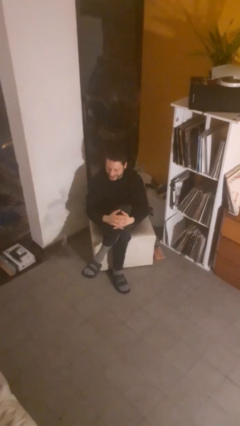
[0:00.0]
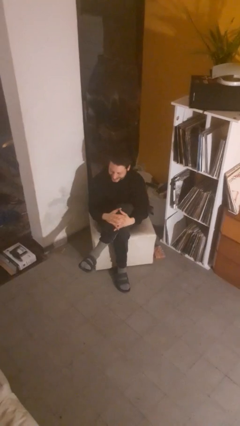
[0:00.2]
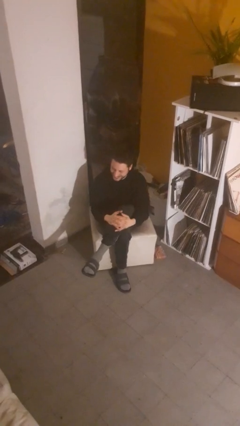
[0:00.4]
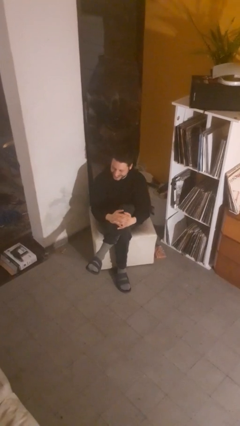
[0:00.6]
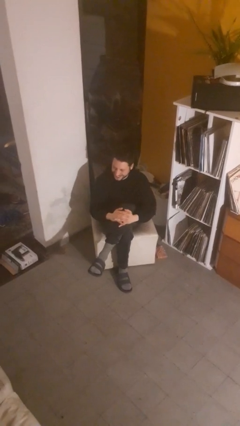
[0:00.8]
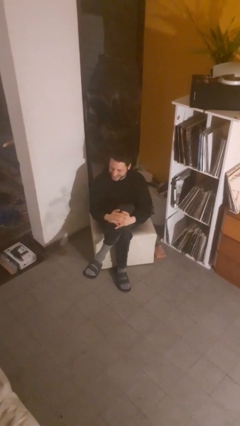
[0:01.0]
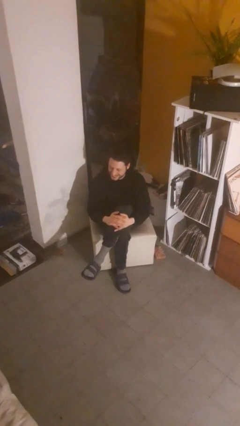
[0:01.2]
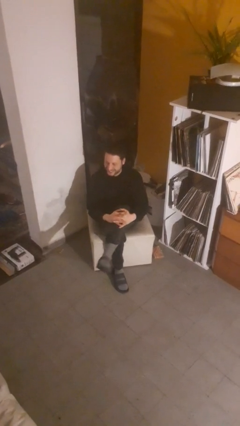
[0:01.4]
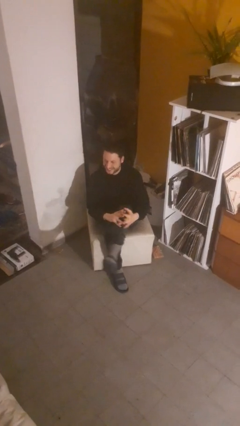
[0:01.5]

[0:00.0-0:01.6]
person crosses legs

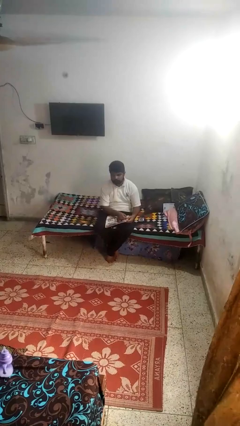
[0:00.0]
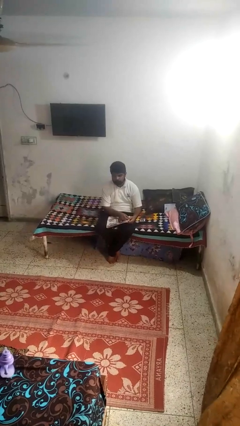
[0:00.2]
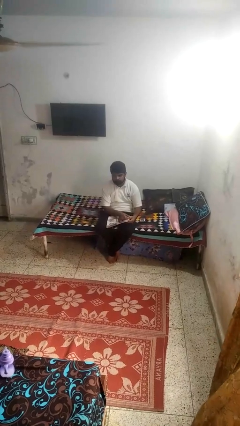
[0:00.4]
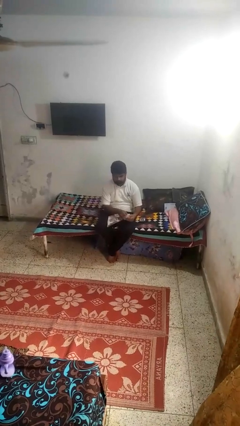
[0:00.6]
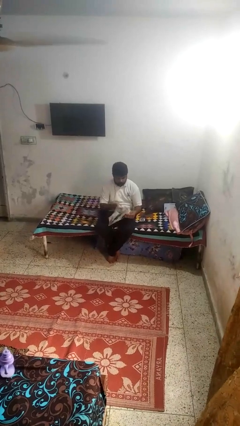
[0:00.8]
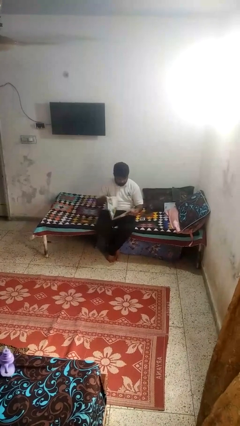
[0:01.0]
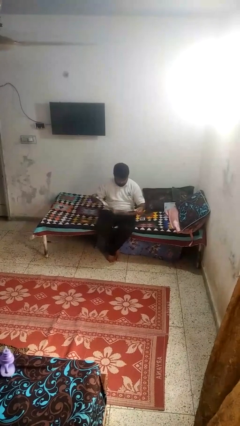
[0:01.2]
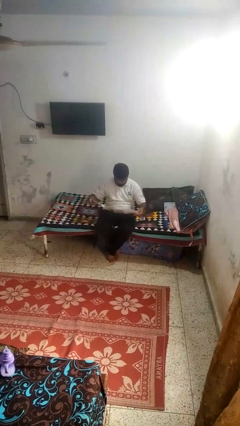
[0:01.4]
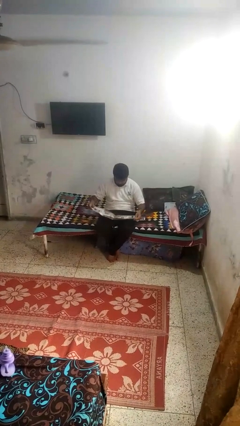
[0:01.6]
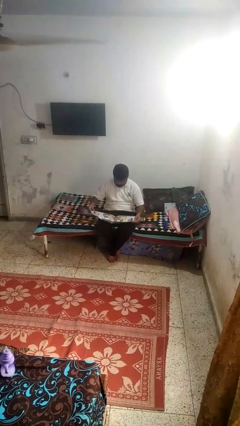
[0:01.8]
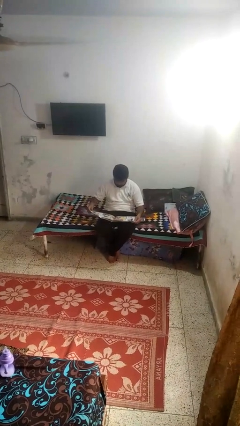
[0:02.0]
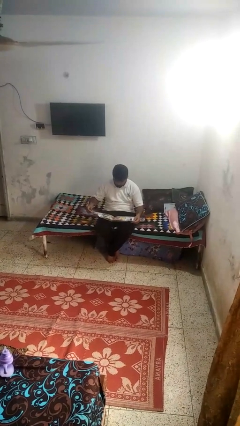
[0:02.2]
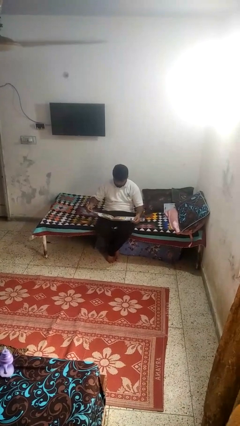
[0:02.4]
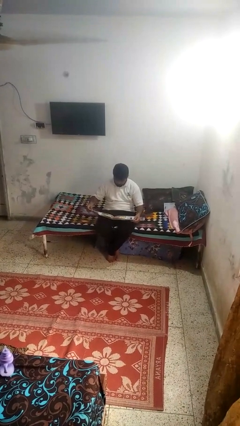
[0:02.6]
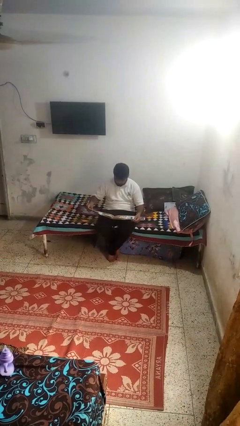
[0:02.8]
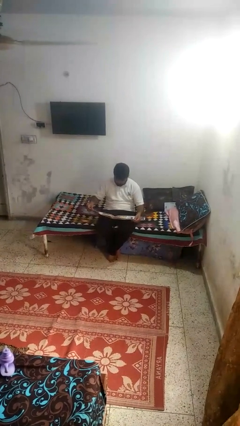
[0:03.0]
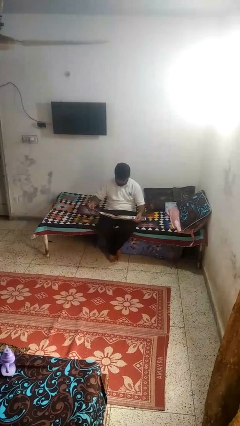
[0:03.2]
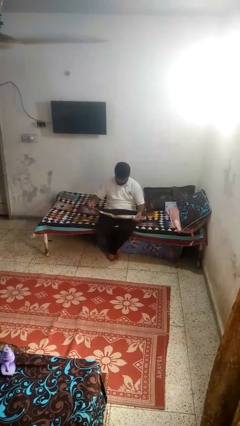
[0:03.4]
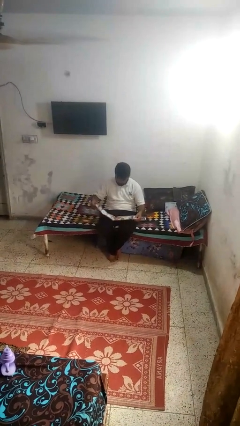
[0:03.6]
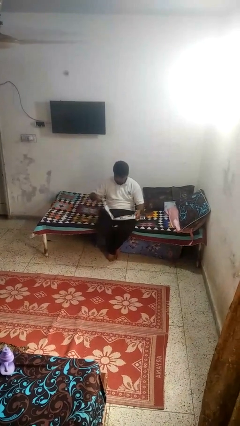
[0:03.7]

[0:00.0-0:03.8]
person reads magazine

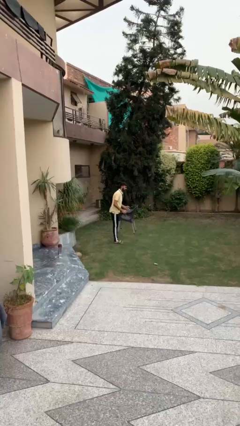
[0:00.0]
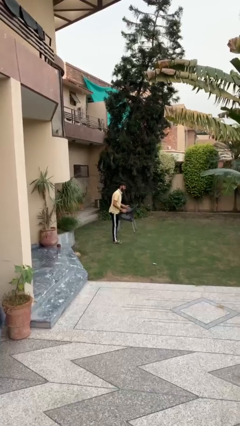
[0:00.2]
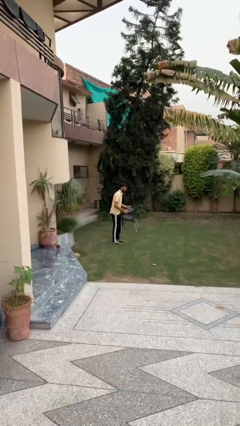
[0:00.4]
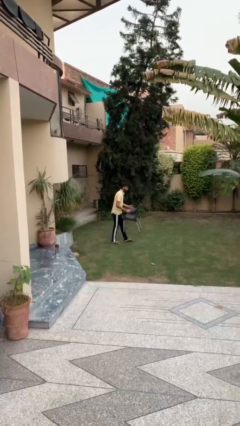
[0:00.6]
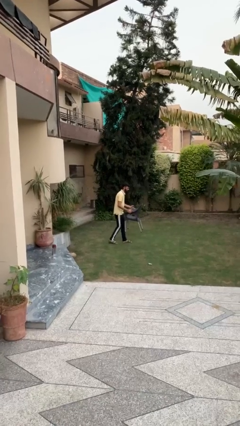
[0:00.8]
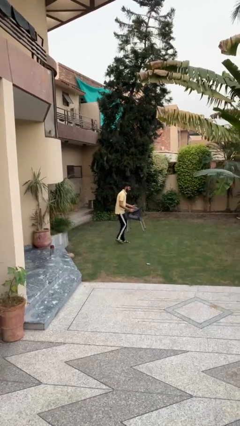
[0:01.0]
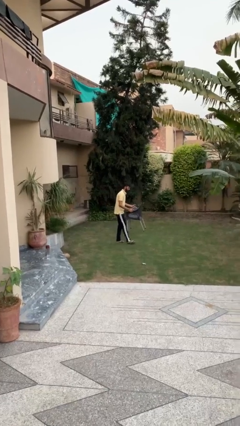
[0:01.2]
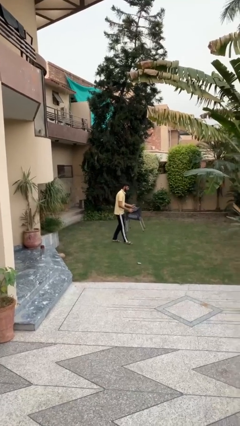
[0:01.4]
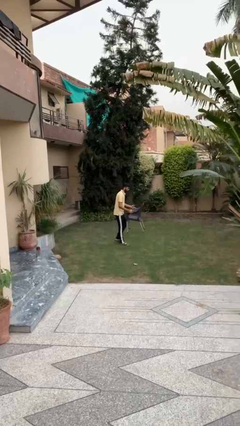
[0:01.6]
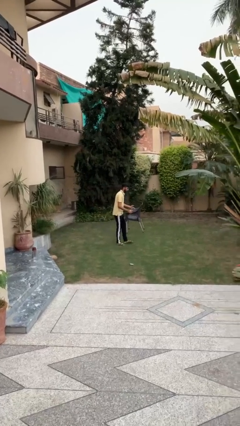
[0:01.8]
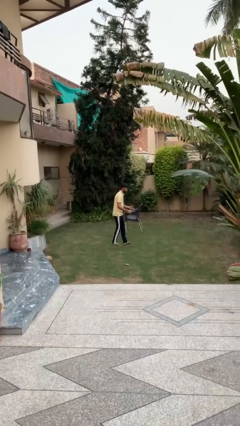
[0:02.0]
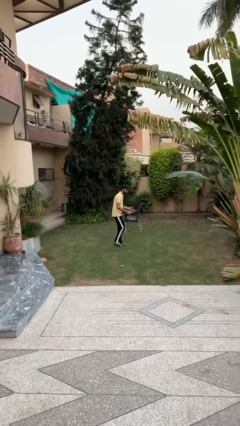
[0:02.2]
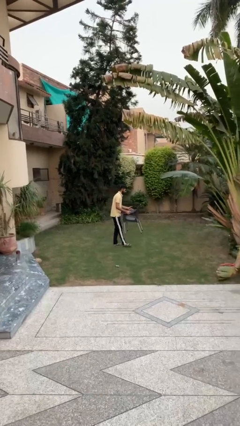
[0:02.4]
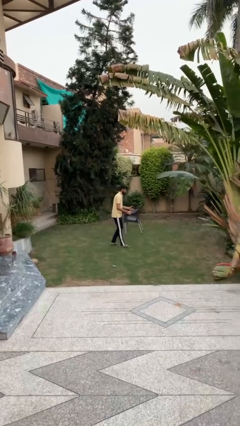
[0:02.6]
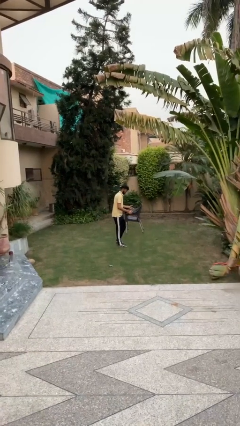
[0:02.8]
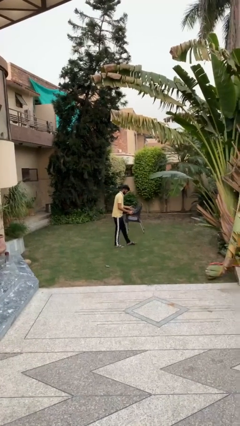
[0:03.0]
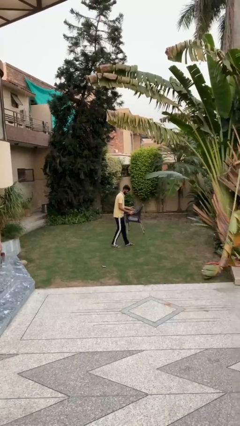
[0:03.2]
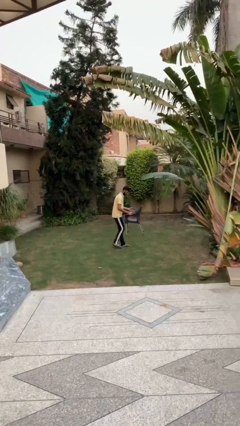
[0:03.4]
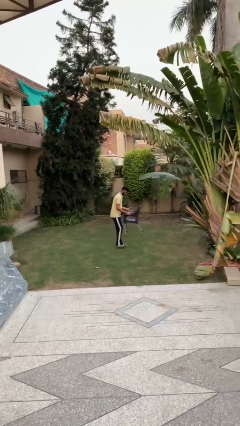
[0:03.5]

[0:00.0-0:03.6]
person carries heavy object

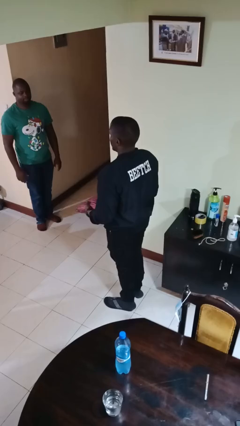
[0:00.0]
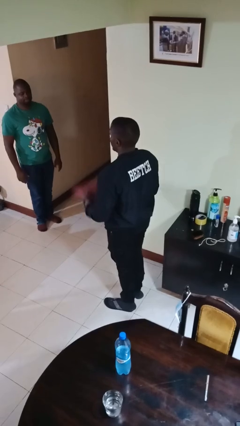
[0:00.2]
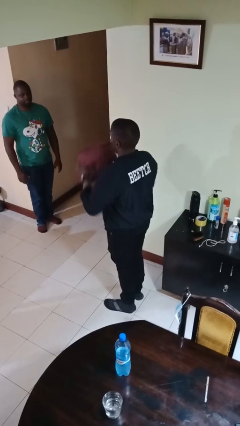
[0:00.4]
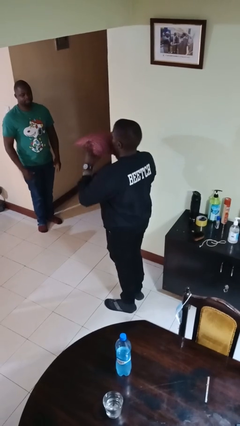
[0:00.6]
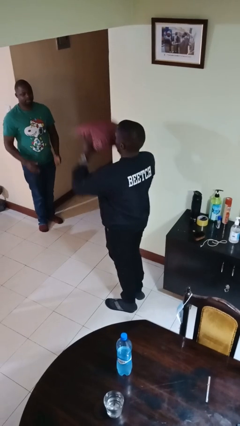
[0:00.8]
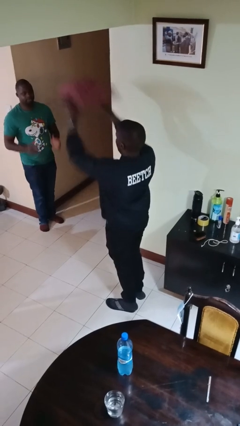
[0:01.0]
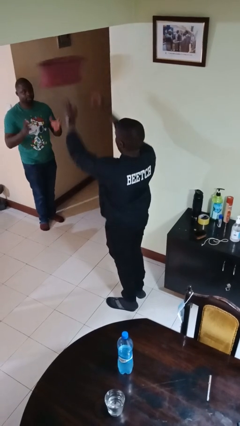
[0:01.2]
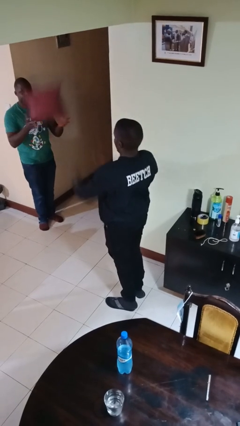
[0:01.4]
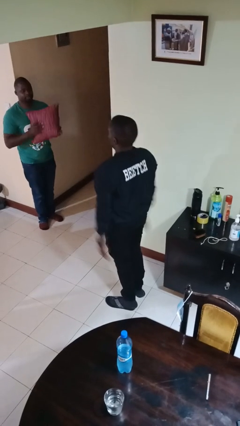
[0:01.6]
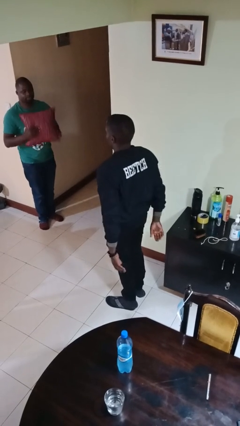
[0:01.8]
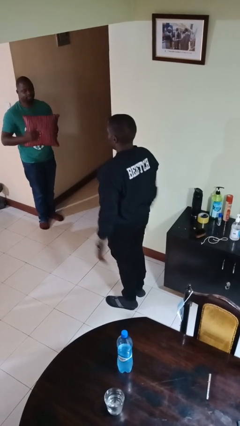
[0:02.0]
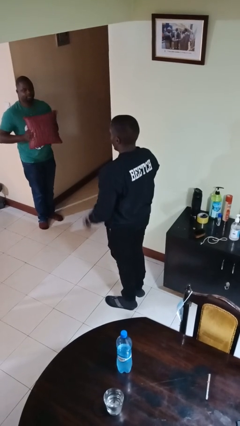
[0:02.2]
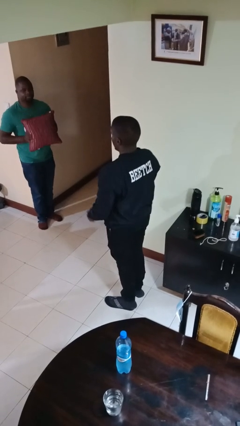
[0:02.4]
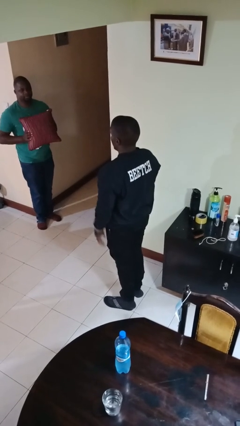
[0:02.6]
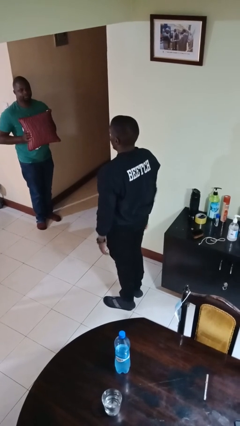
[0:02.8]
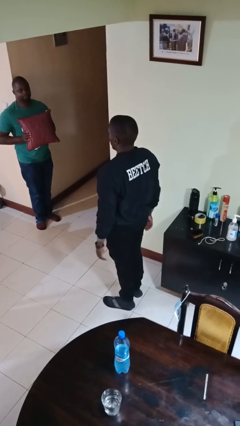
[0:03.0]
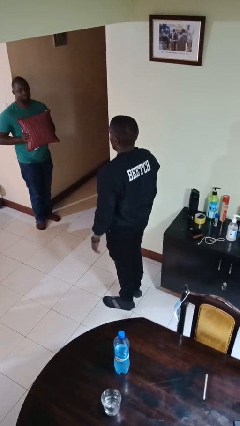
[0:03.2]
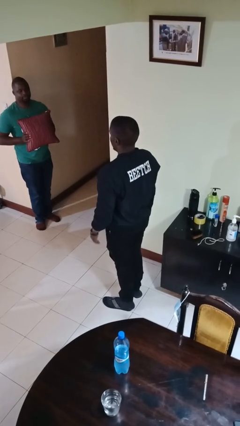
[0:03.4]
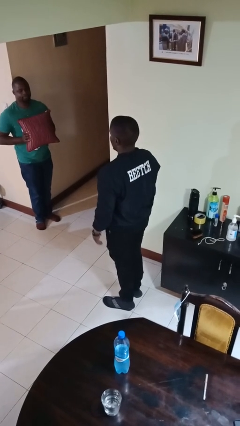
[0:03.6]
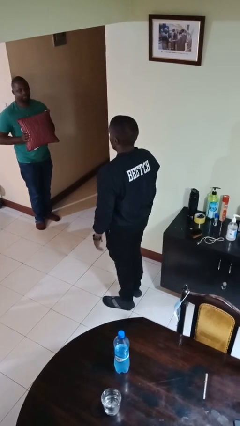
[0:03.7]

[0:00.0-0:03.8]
person throws object to person

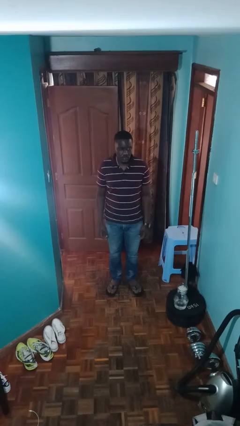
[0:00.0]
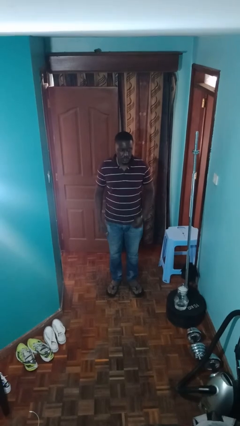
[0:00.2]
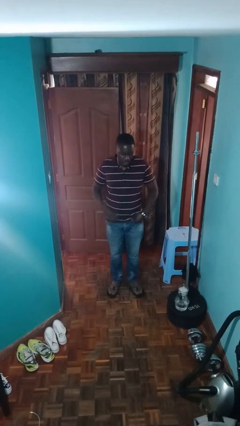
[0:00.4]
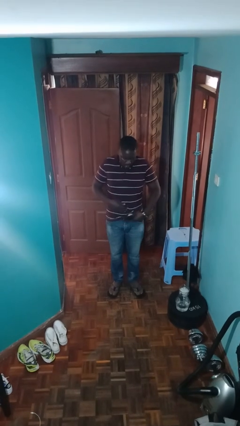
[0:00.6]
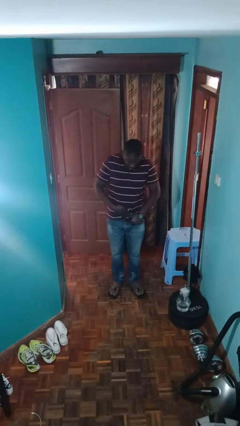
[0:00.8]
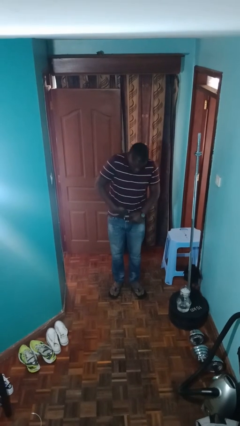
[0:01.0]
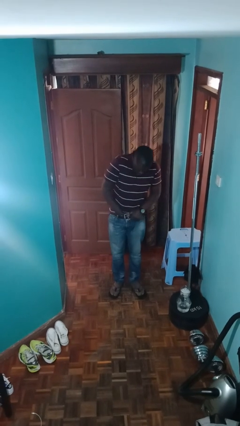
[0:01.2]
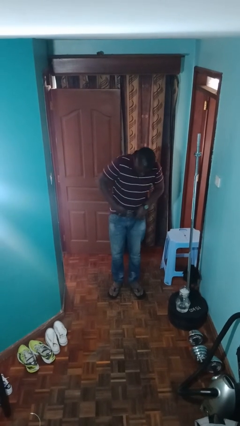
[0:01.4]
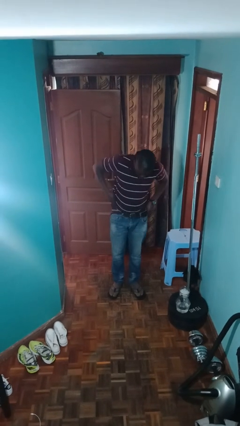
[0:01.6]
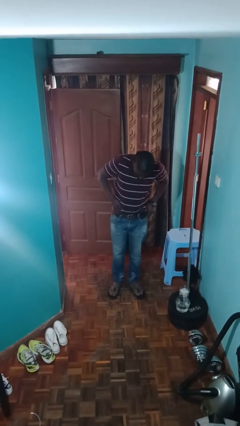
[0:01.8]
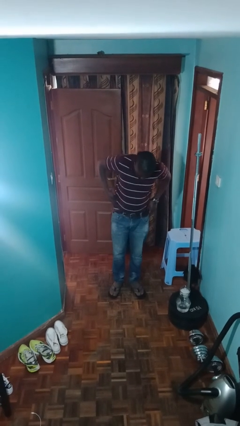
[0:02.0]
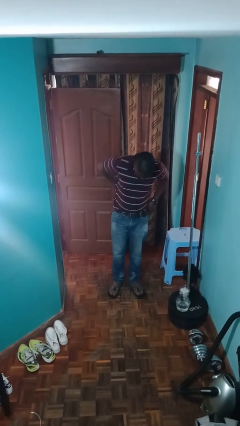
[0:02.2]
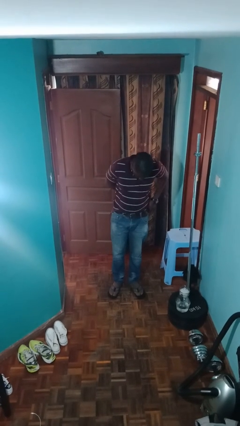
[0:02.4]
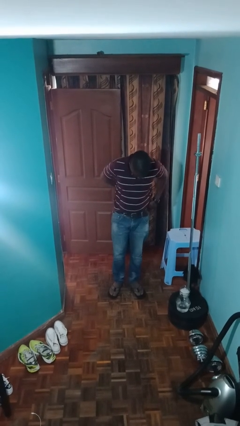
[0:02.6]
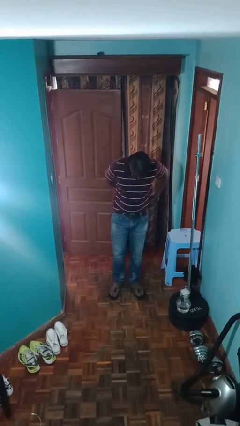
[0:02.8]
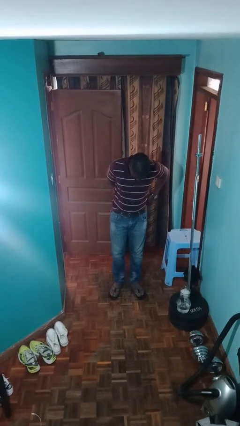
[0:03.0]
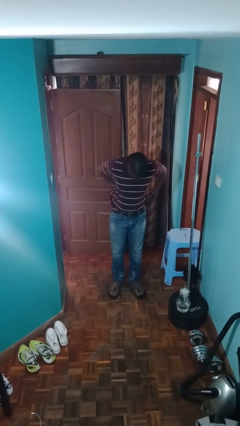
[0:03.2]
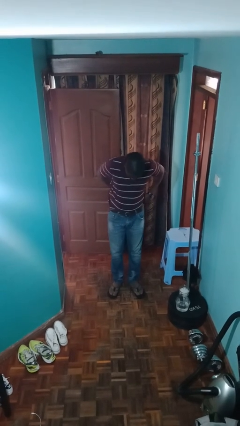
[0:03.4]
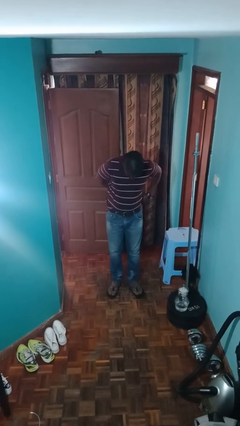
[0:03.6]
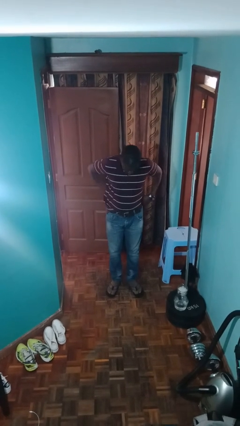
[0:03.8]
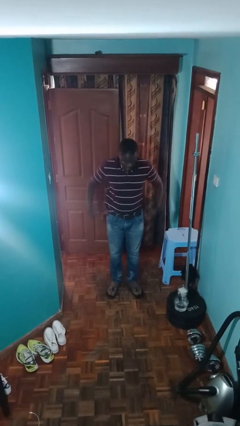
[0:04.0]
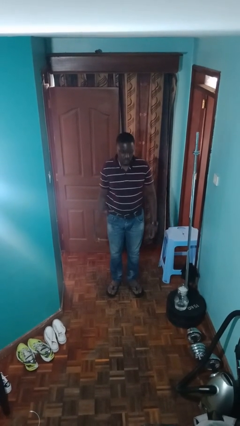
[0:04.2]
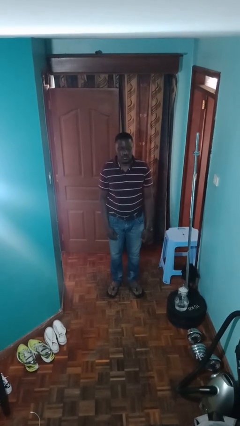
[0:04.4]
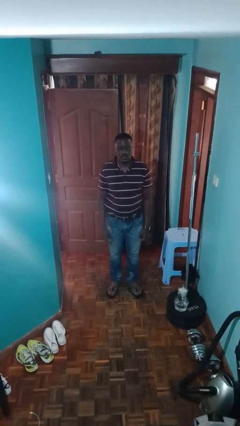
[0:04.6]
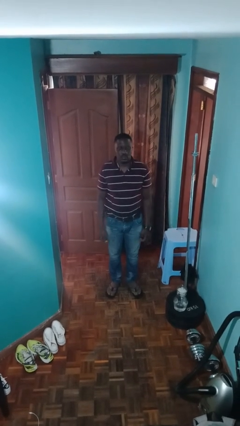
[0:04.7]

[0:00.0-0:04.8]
person tucks in shirt
